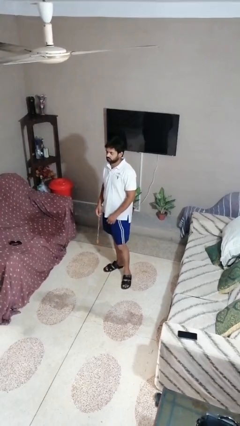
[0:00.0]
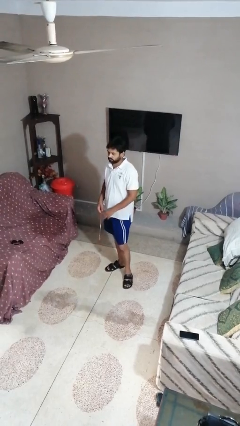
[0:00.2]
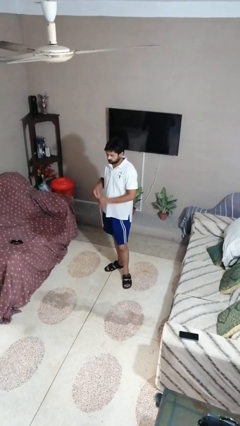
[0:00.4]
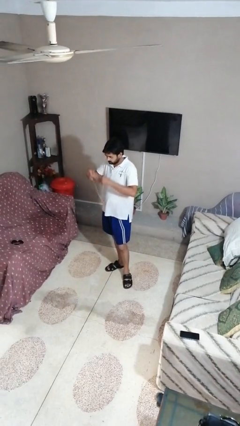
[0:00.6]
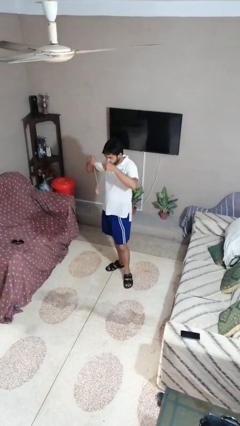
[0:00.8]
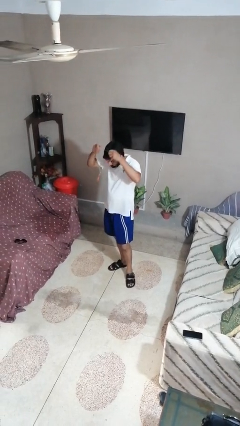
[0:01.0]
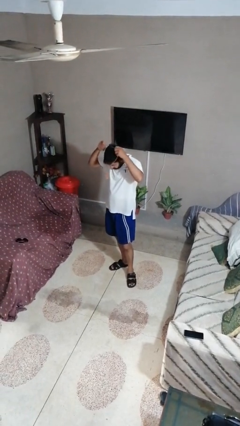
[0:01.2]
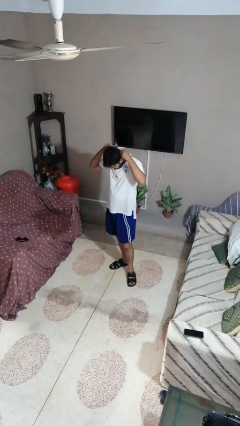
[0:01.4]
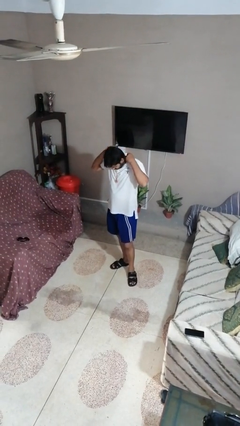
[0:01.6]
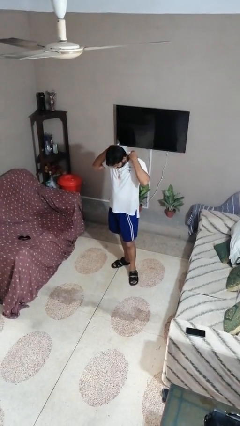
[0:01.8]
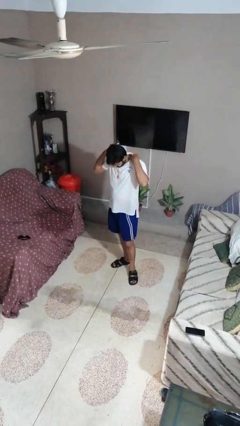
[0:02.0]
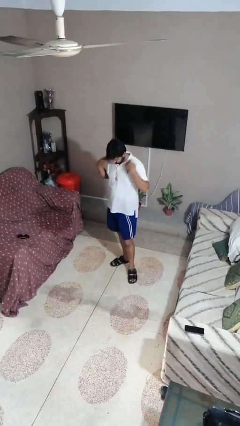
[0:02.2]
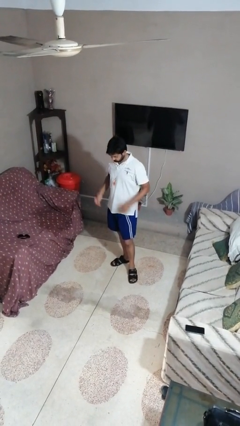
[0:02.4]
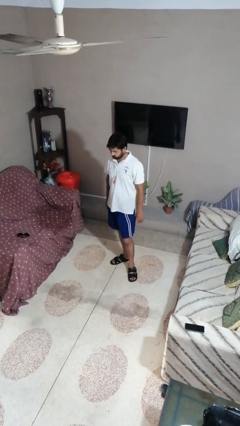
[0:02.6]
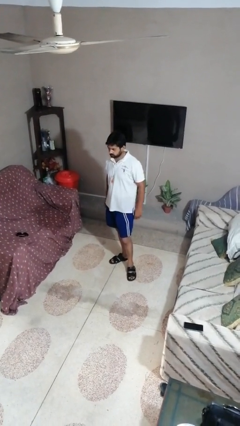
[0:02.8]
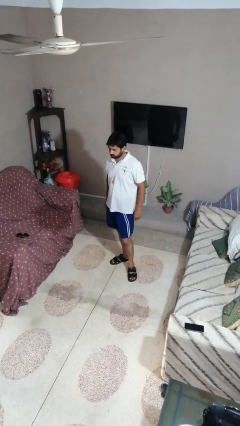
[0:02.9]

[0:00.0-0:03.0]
person puts on necklace

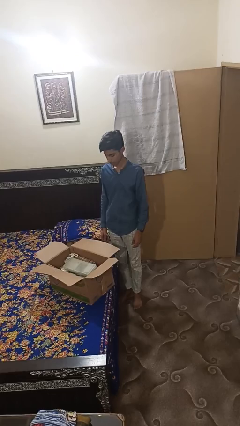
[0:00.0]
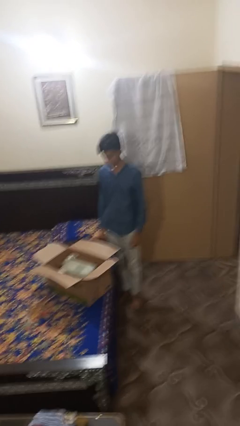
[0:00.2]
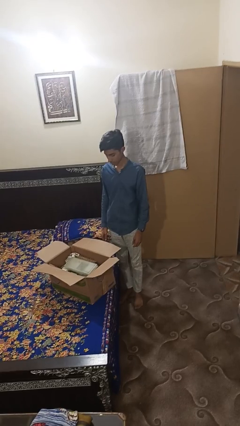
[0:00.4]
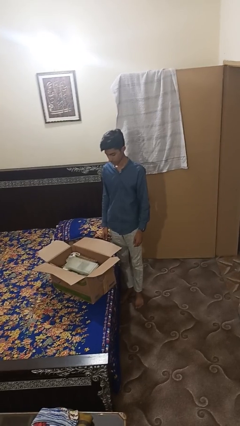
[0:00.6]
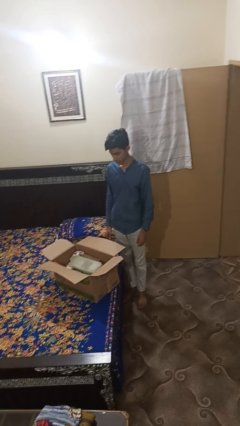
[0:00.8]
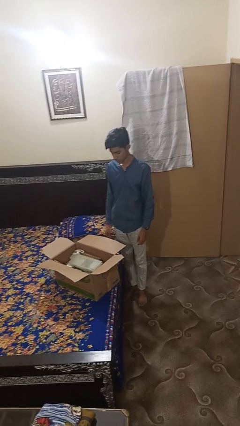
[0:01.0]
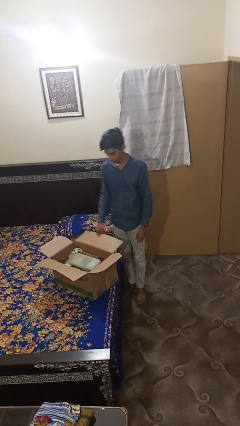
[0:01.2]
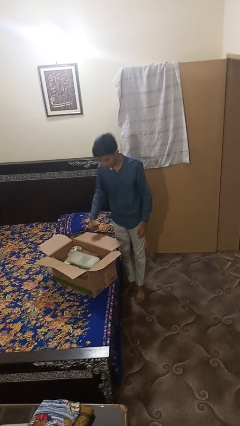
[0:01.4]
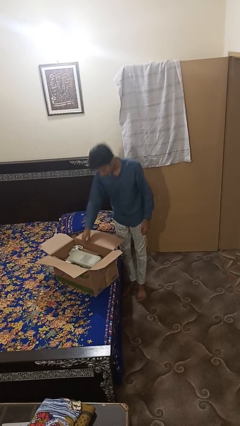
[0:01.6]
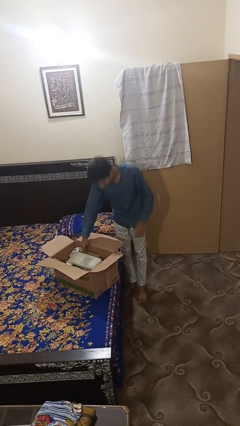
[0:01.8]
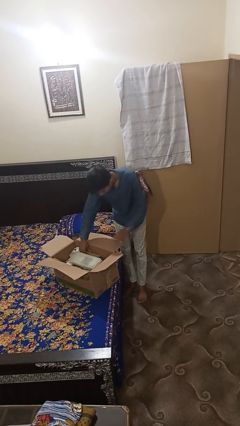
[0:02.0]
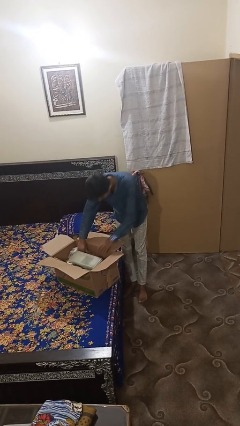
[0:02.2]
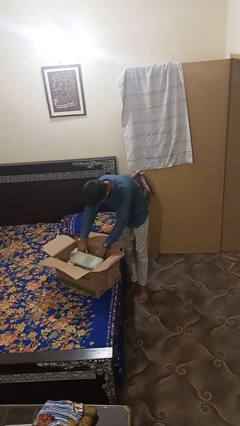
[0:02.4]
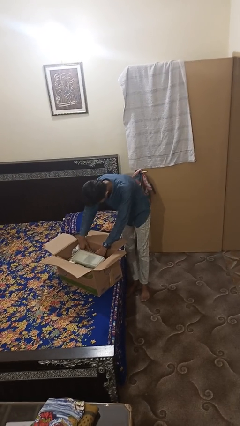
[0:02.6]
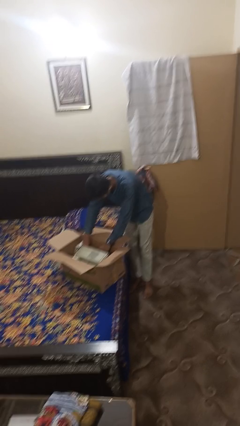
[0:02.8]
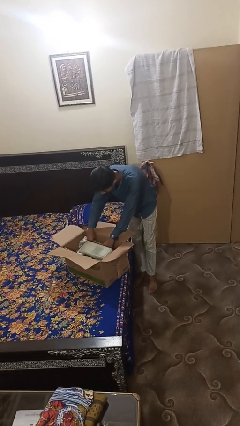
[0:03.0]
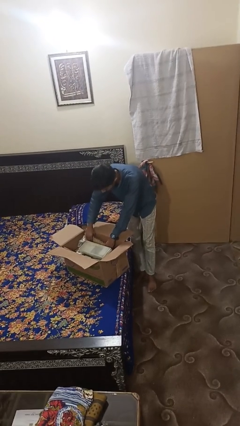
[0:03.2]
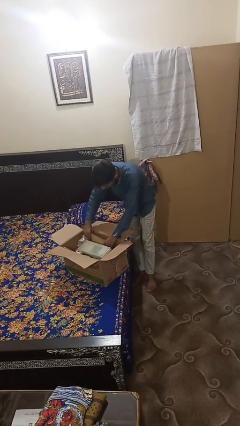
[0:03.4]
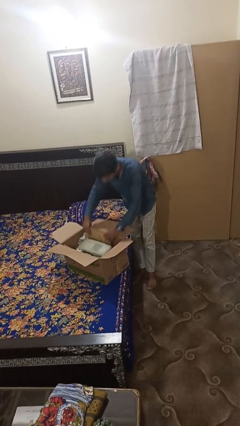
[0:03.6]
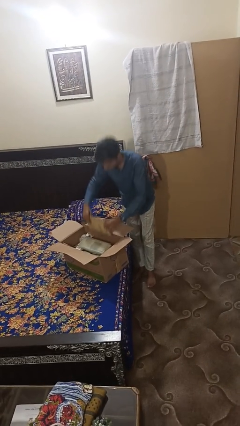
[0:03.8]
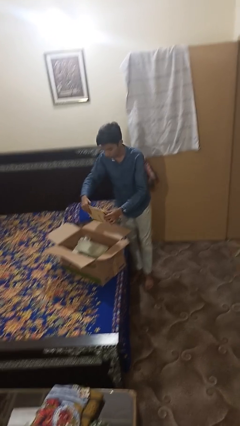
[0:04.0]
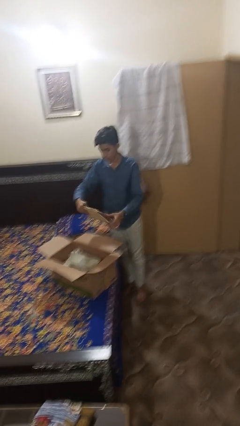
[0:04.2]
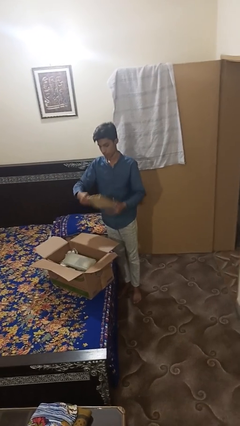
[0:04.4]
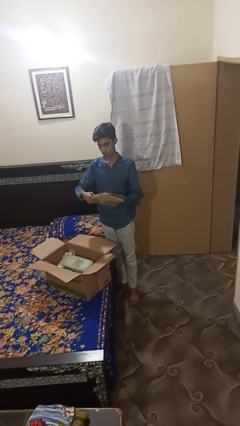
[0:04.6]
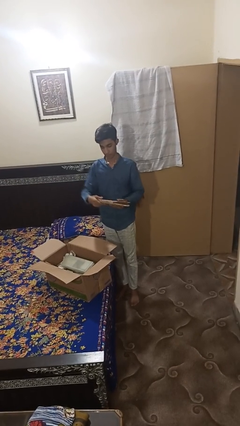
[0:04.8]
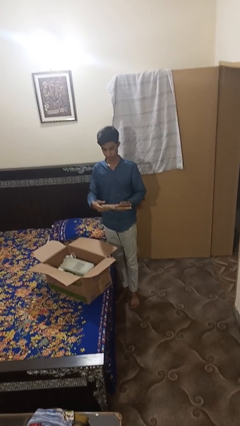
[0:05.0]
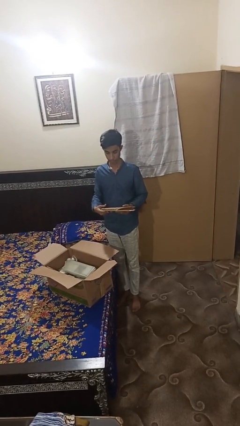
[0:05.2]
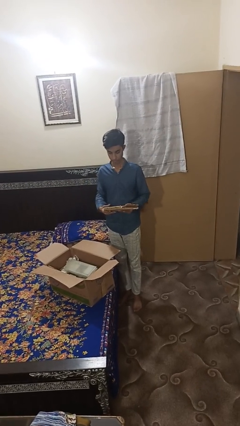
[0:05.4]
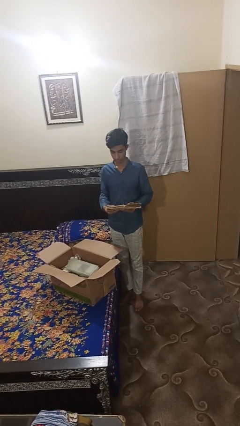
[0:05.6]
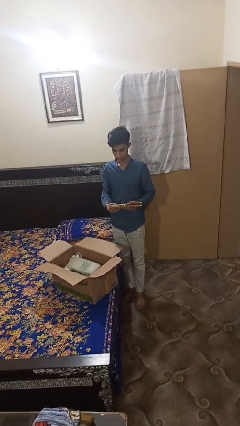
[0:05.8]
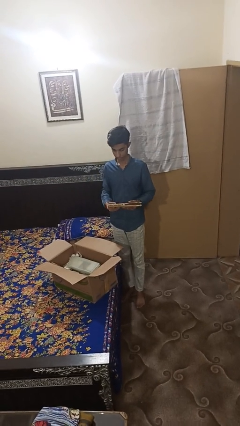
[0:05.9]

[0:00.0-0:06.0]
person takes object from box

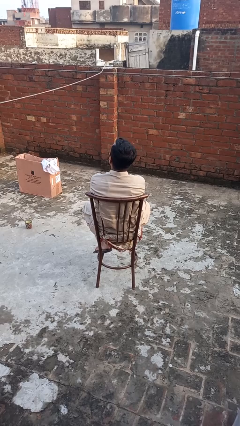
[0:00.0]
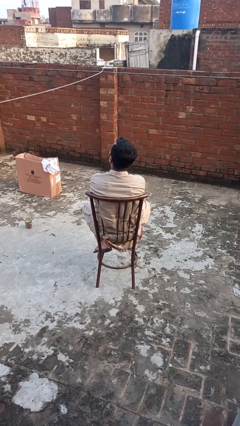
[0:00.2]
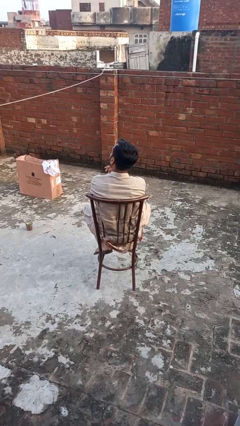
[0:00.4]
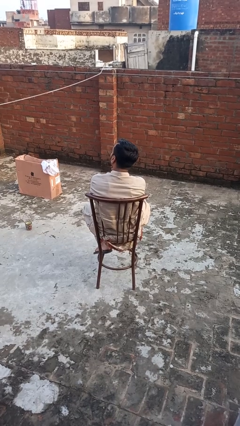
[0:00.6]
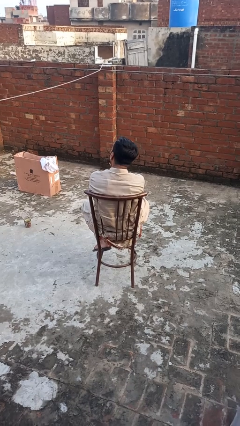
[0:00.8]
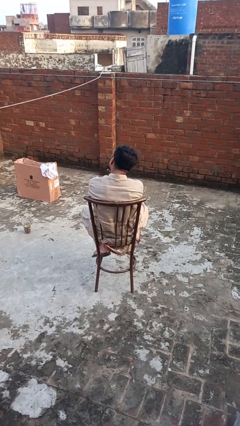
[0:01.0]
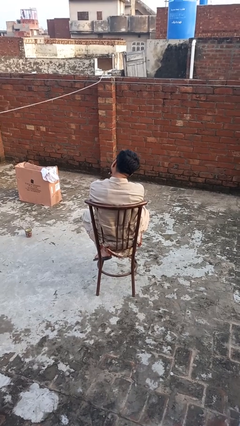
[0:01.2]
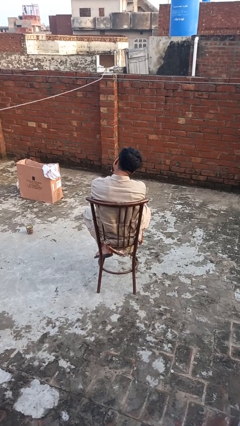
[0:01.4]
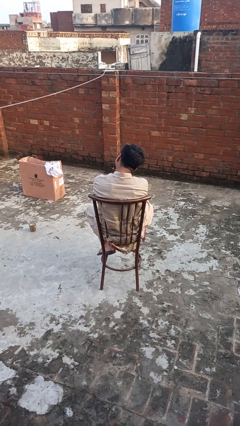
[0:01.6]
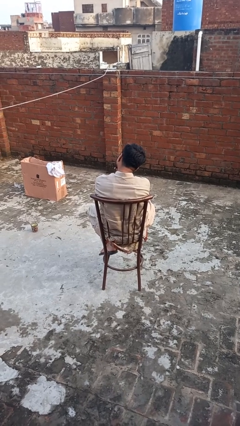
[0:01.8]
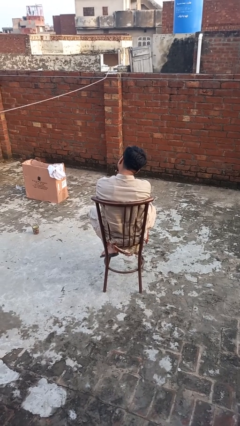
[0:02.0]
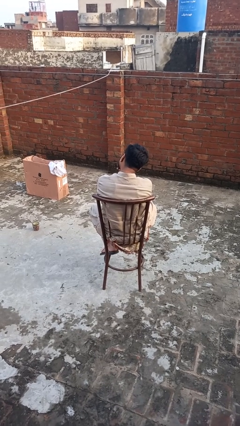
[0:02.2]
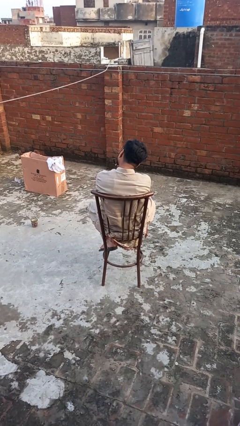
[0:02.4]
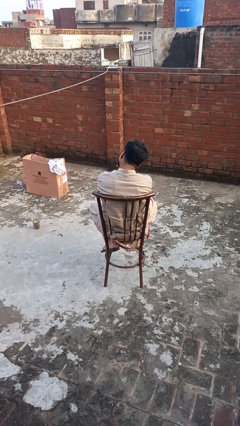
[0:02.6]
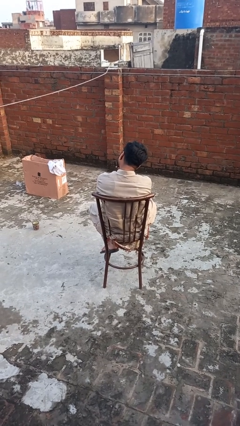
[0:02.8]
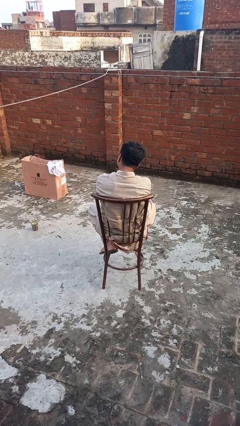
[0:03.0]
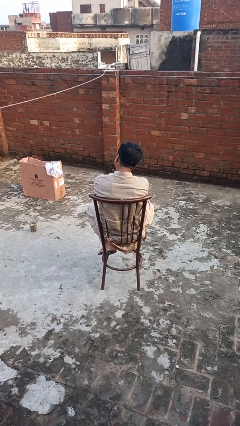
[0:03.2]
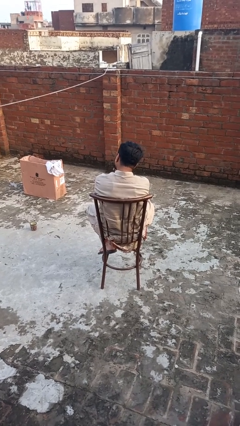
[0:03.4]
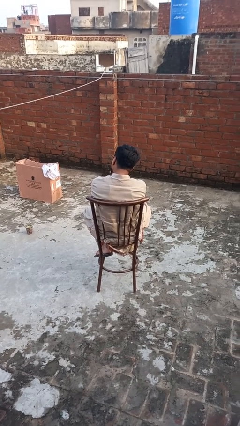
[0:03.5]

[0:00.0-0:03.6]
person strokes chin

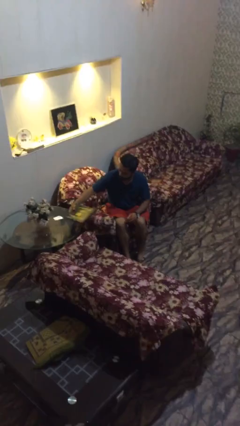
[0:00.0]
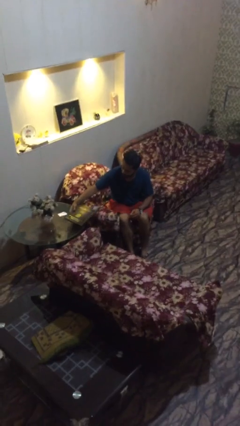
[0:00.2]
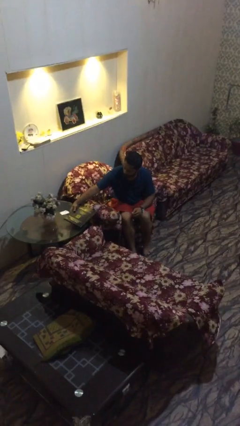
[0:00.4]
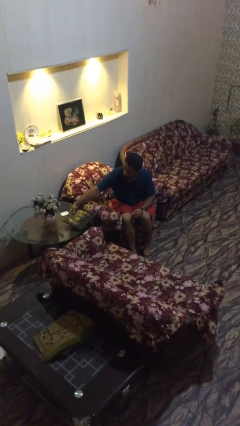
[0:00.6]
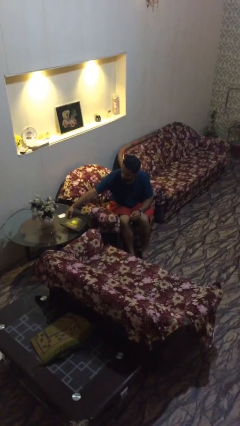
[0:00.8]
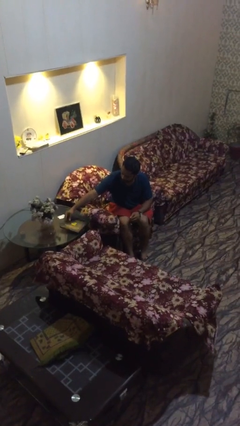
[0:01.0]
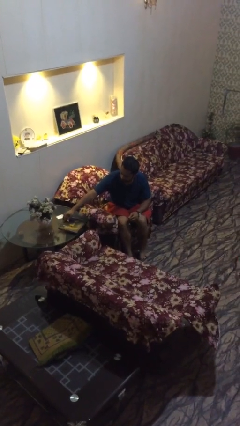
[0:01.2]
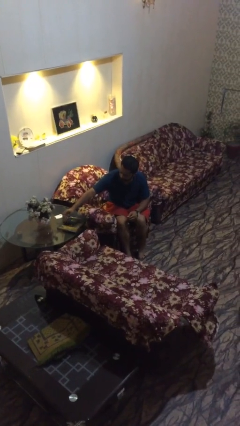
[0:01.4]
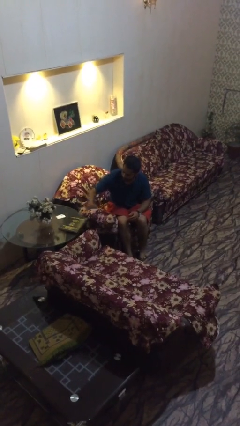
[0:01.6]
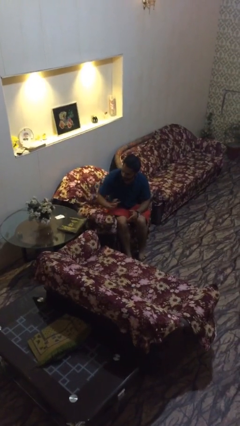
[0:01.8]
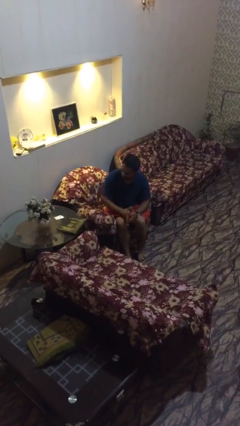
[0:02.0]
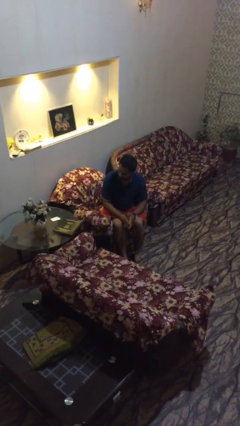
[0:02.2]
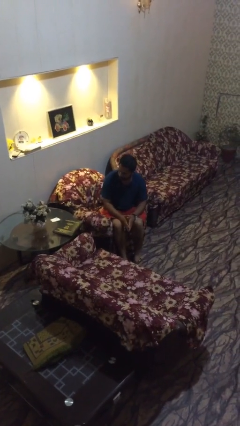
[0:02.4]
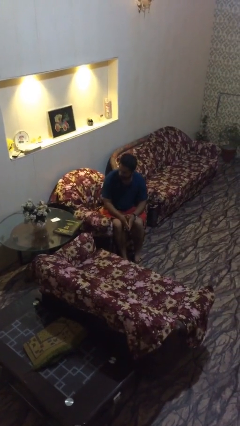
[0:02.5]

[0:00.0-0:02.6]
person puts down object on table

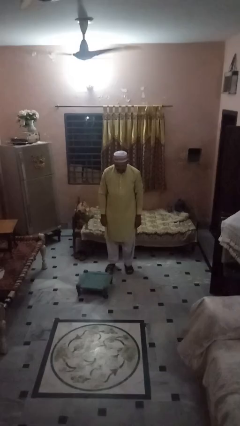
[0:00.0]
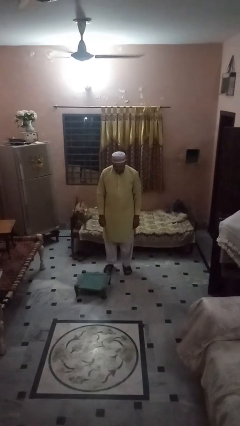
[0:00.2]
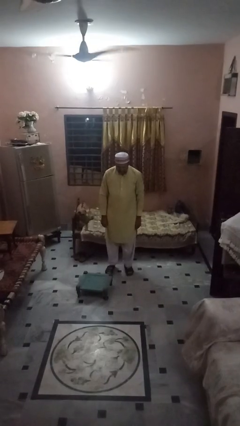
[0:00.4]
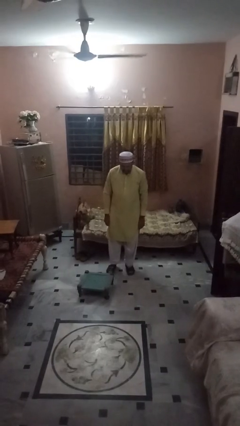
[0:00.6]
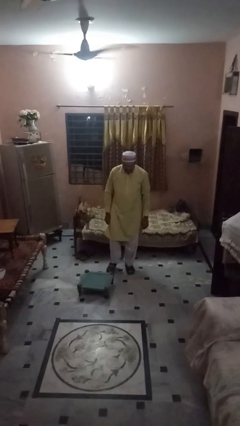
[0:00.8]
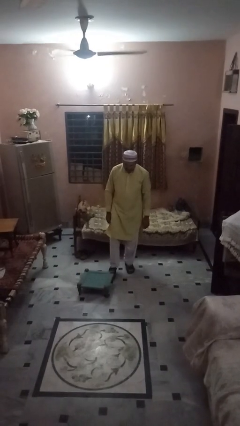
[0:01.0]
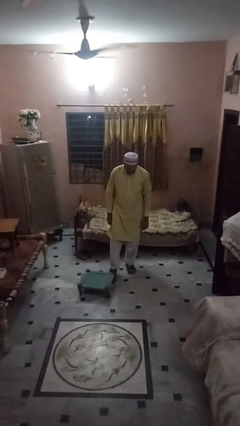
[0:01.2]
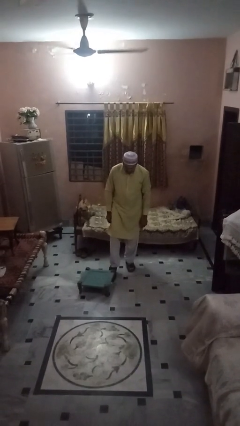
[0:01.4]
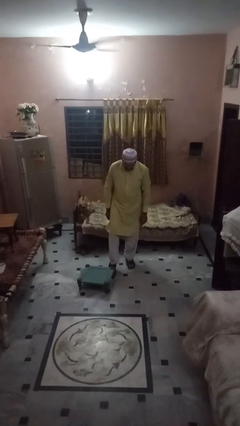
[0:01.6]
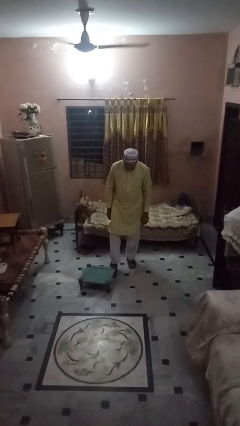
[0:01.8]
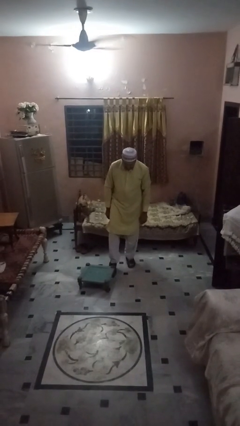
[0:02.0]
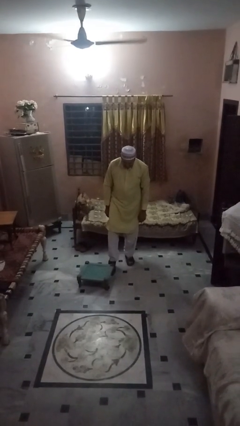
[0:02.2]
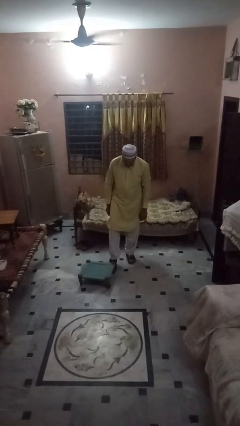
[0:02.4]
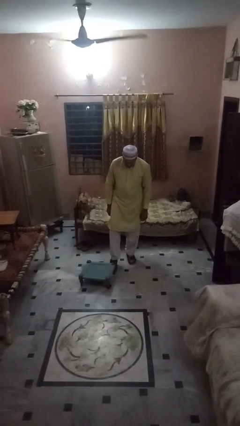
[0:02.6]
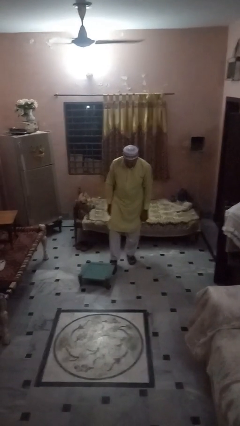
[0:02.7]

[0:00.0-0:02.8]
person trips on object on floor
